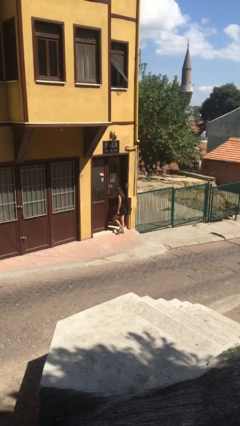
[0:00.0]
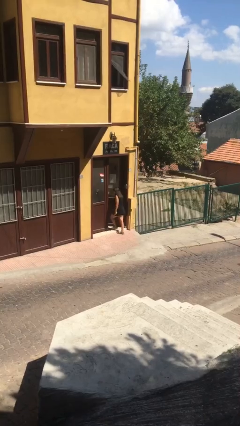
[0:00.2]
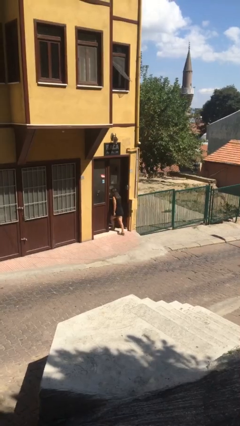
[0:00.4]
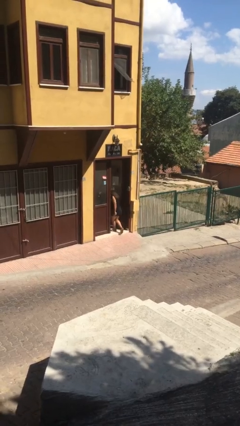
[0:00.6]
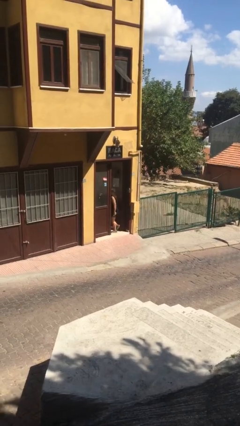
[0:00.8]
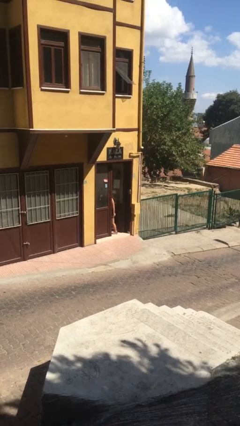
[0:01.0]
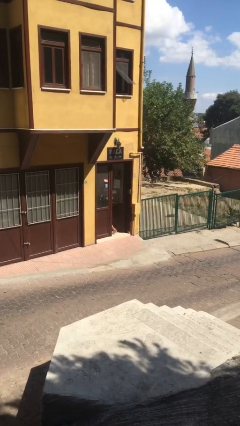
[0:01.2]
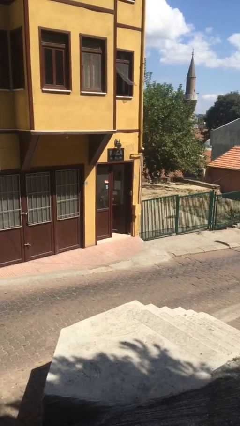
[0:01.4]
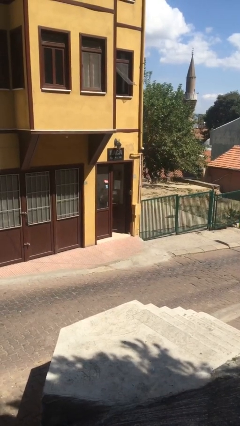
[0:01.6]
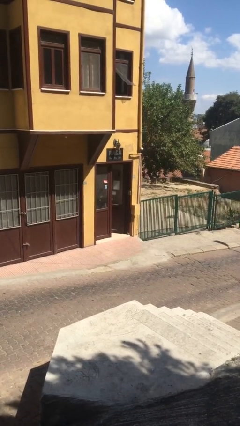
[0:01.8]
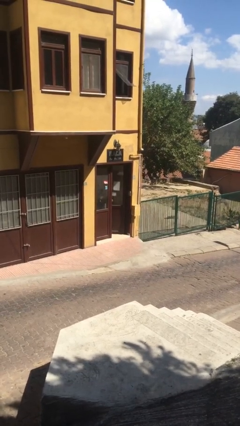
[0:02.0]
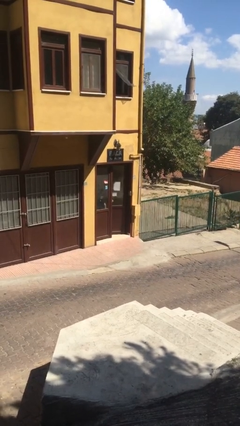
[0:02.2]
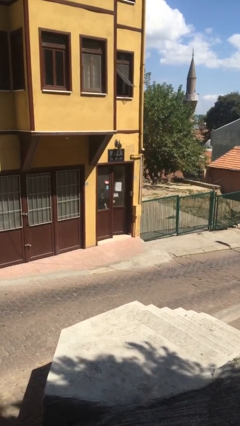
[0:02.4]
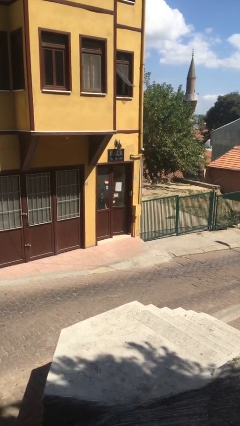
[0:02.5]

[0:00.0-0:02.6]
person exits scene through structure

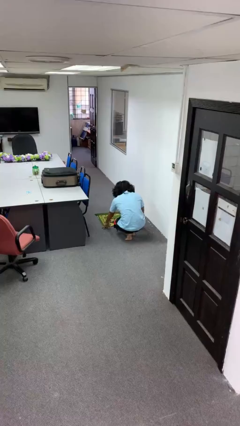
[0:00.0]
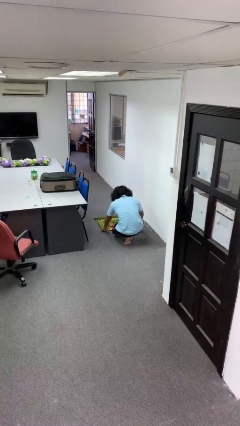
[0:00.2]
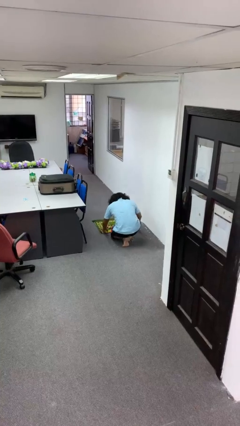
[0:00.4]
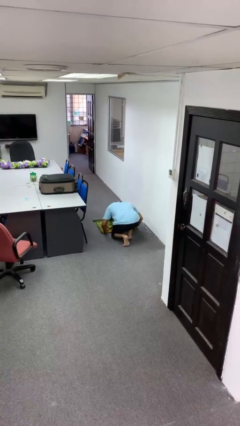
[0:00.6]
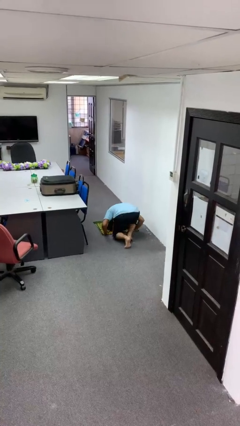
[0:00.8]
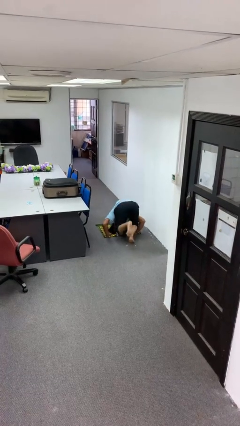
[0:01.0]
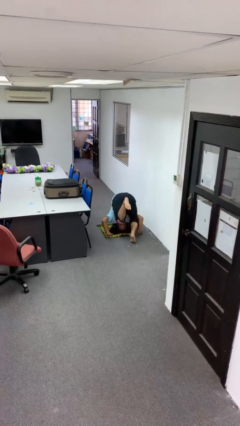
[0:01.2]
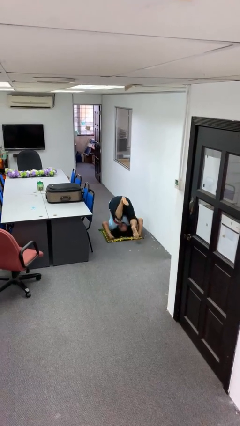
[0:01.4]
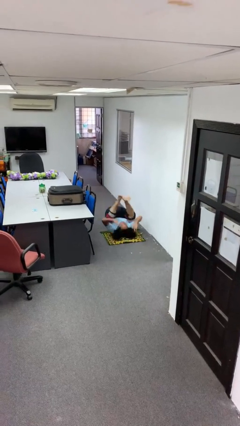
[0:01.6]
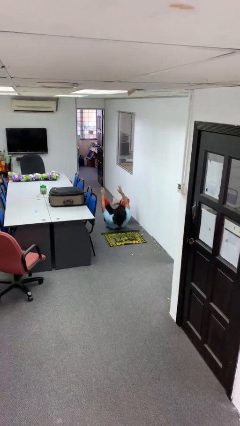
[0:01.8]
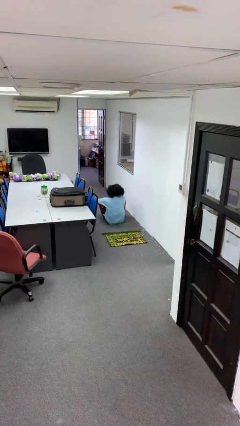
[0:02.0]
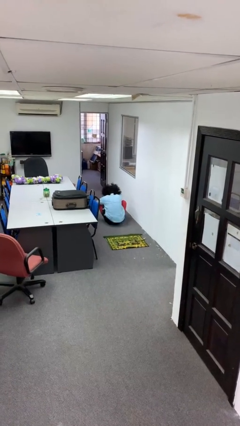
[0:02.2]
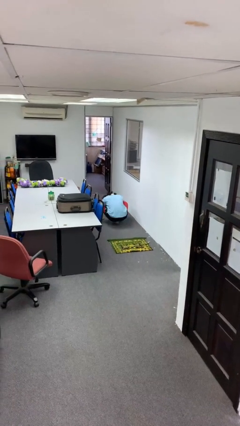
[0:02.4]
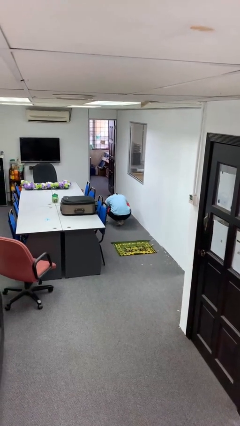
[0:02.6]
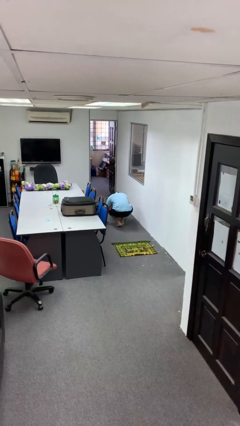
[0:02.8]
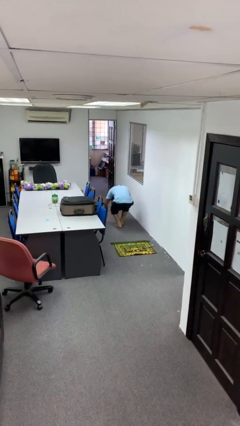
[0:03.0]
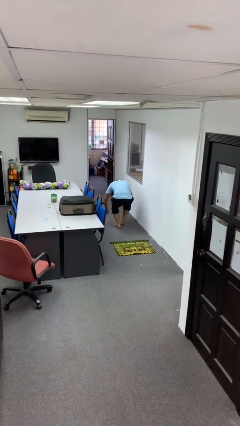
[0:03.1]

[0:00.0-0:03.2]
person somersaults

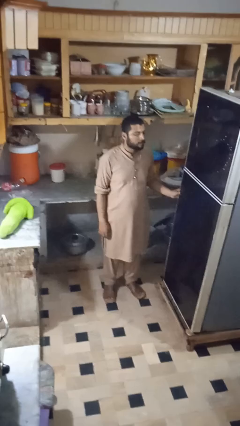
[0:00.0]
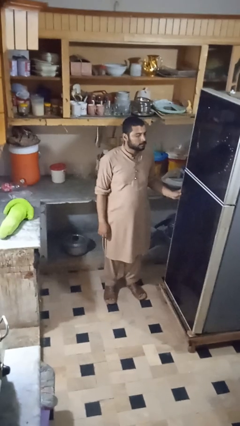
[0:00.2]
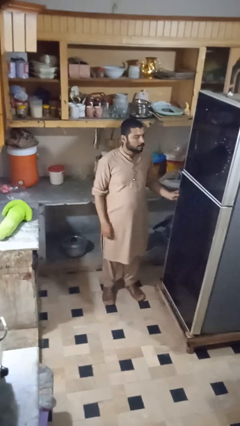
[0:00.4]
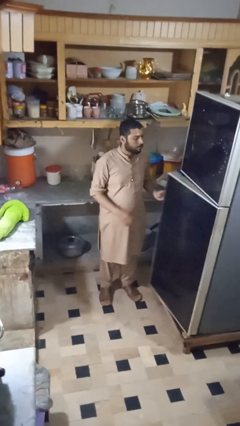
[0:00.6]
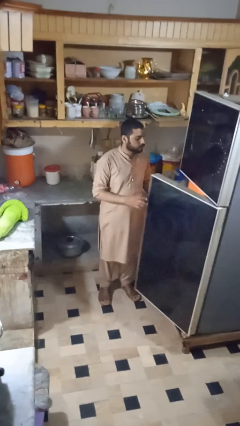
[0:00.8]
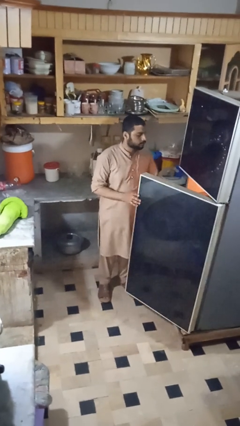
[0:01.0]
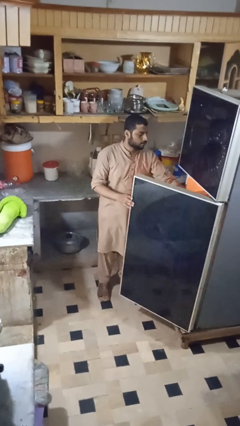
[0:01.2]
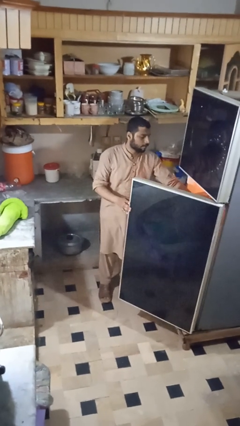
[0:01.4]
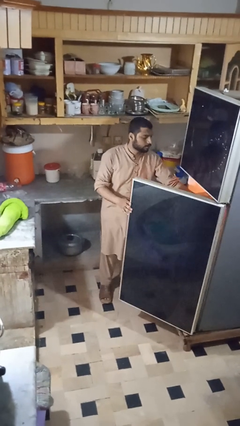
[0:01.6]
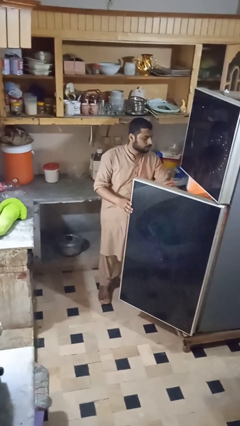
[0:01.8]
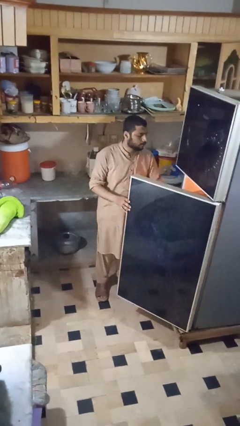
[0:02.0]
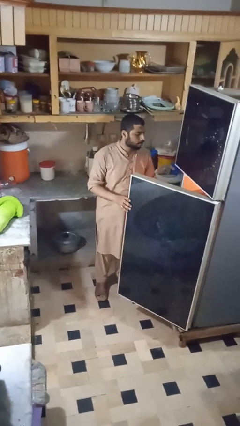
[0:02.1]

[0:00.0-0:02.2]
person takes object from refrigerator

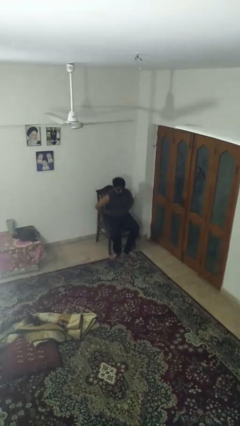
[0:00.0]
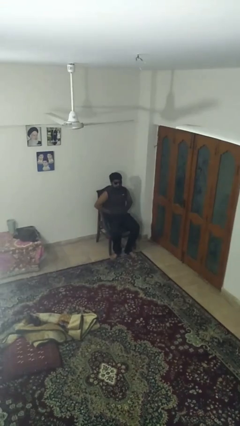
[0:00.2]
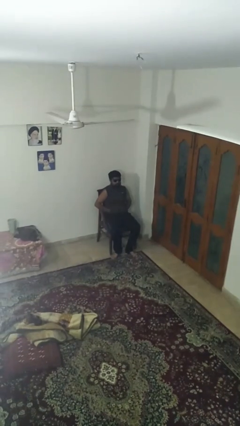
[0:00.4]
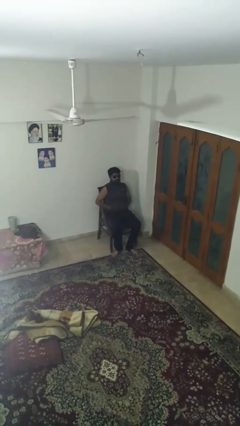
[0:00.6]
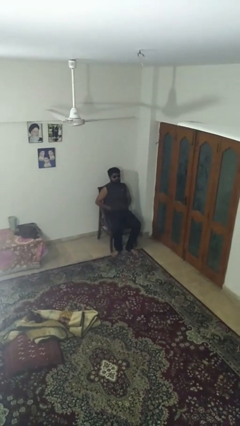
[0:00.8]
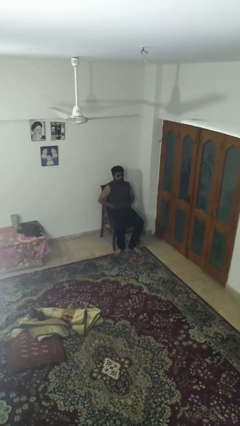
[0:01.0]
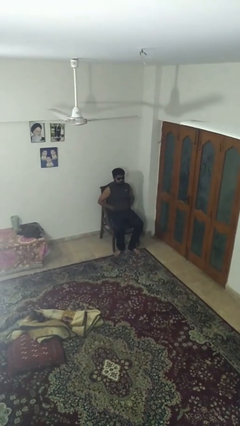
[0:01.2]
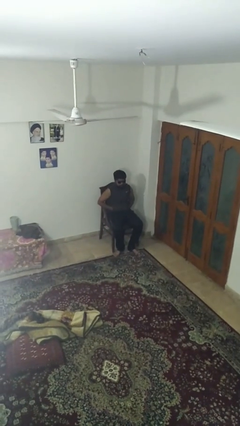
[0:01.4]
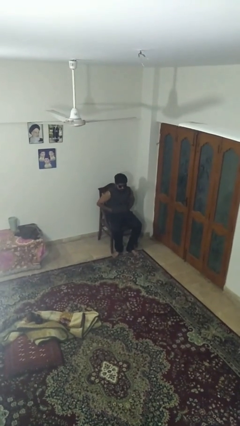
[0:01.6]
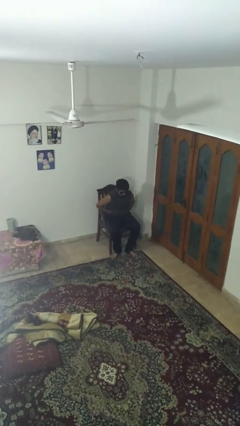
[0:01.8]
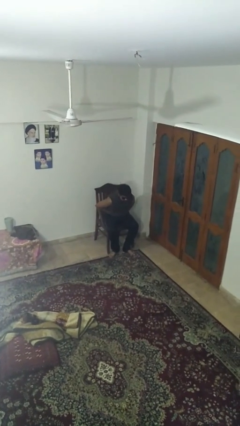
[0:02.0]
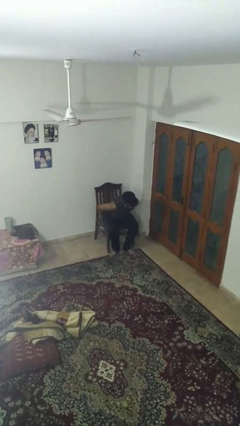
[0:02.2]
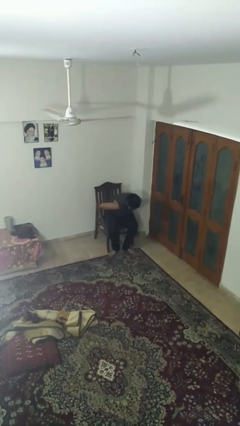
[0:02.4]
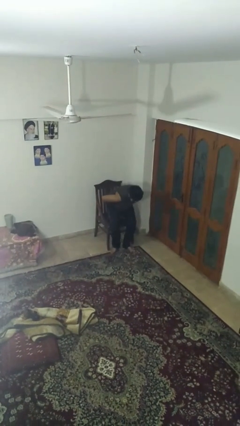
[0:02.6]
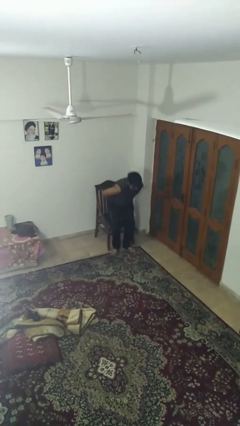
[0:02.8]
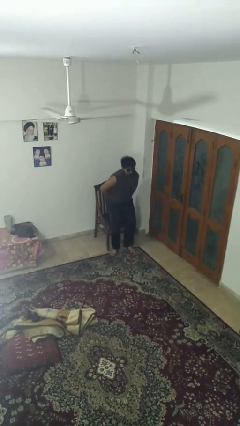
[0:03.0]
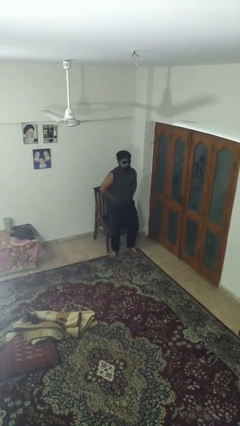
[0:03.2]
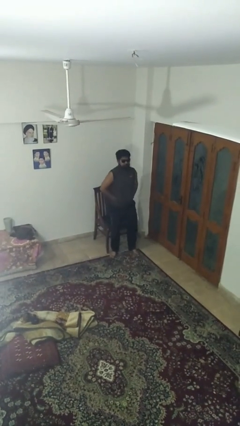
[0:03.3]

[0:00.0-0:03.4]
person stands up

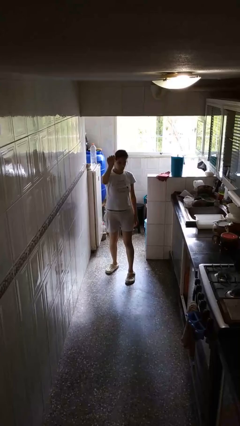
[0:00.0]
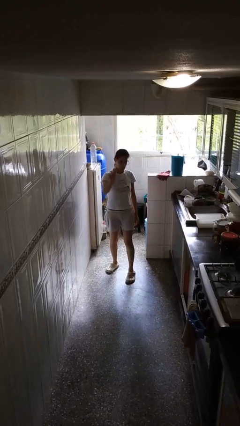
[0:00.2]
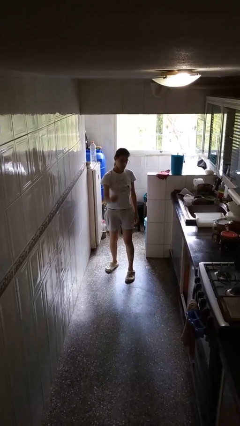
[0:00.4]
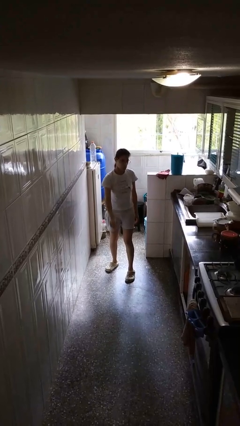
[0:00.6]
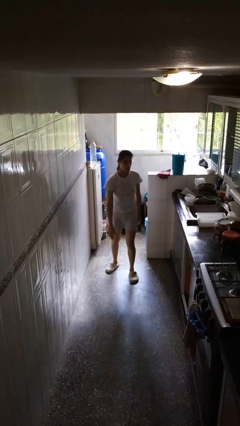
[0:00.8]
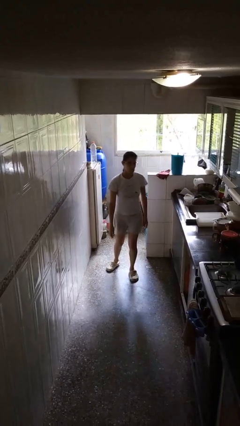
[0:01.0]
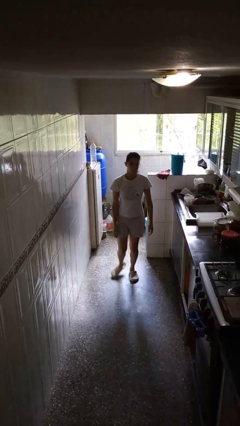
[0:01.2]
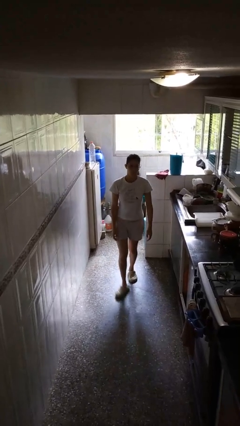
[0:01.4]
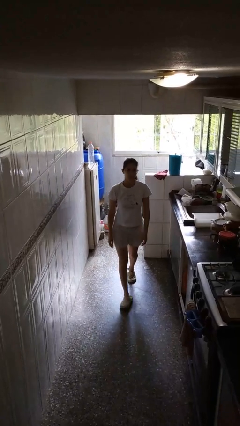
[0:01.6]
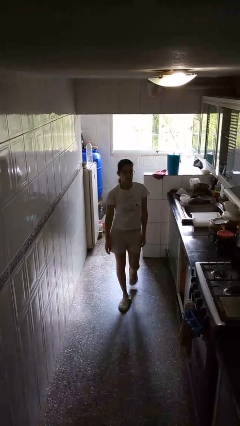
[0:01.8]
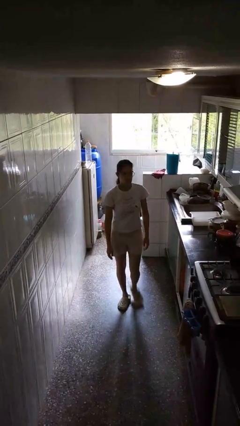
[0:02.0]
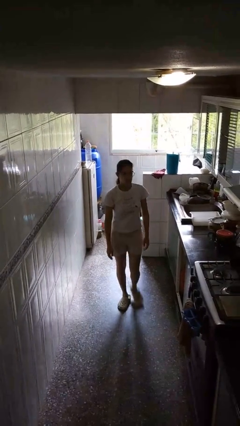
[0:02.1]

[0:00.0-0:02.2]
person gestures lower hand

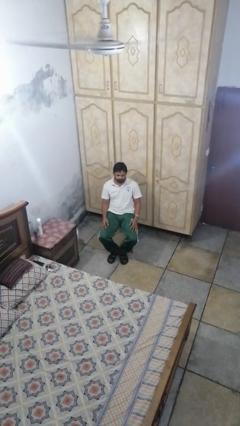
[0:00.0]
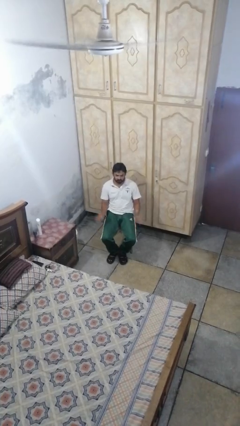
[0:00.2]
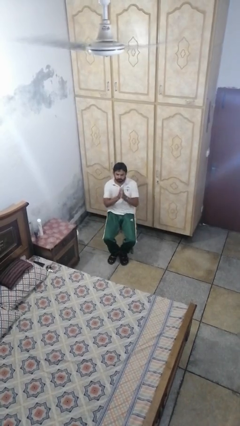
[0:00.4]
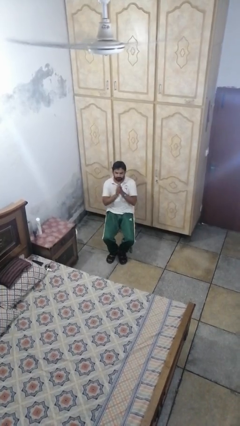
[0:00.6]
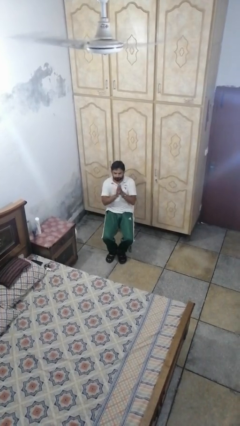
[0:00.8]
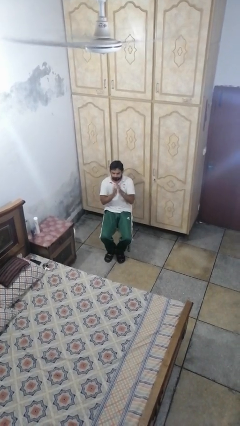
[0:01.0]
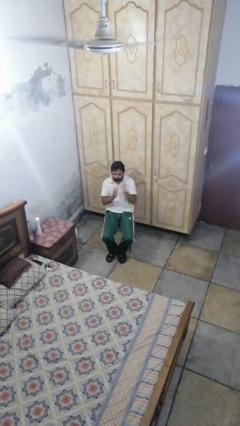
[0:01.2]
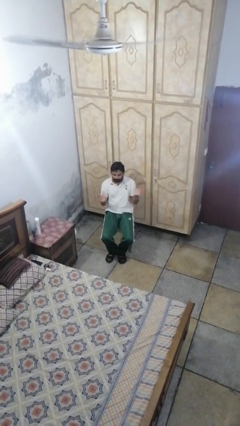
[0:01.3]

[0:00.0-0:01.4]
person claps hands

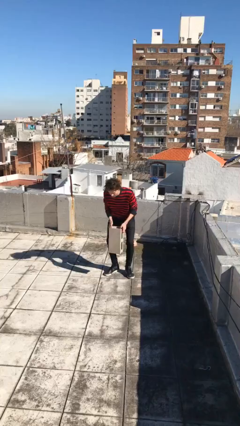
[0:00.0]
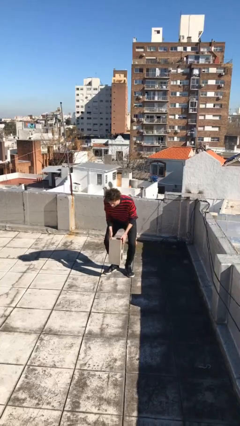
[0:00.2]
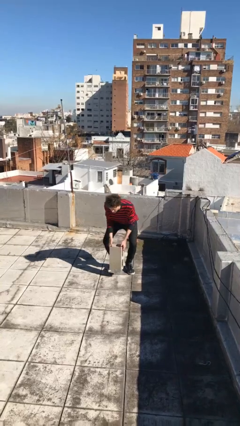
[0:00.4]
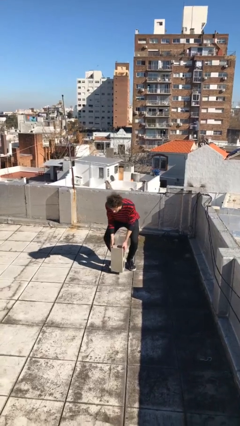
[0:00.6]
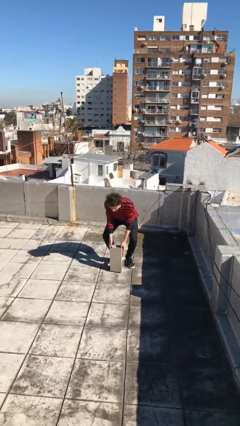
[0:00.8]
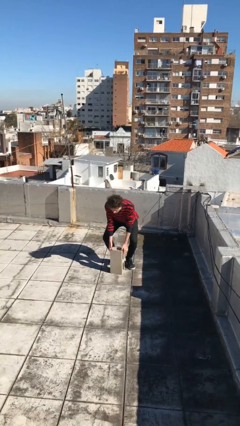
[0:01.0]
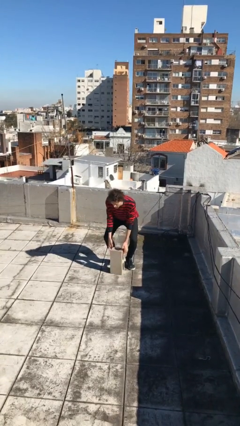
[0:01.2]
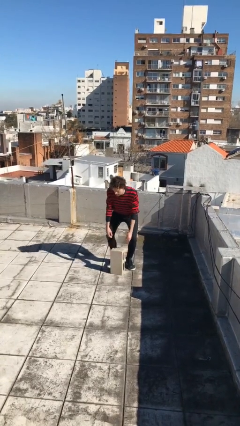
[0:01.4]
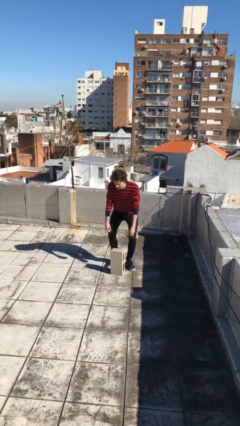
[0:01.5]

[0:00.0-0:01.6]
person puts down object on floor

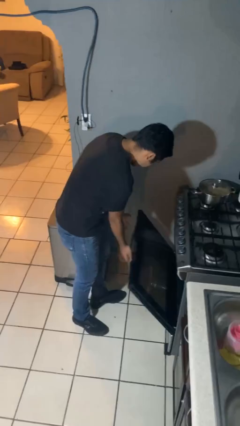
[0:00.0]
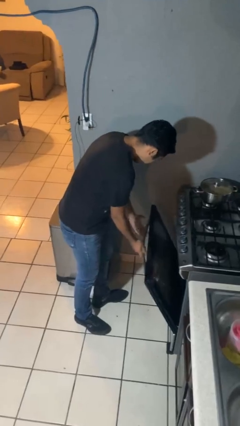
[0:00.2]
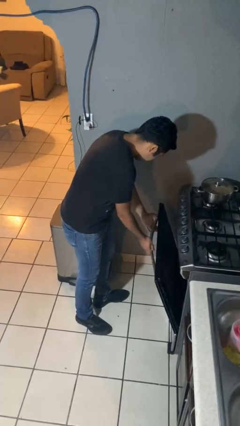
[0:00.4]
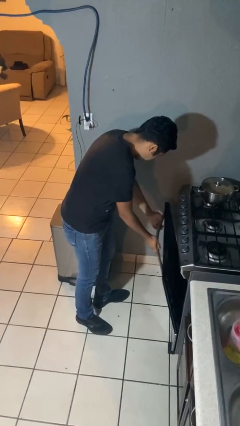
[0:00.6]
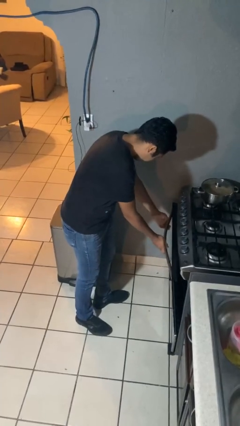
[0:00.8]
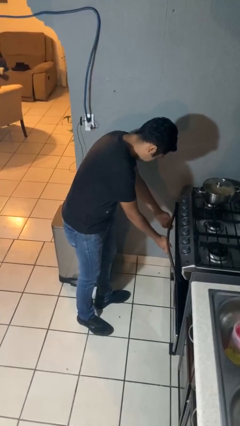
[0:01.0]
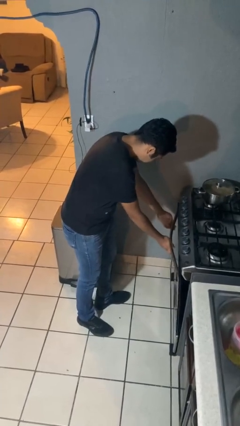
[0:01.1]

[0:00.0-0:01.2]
person closes oven door
